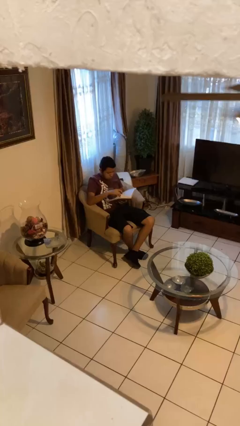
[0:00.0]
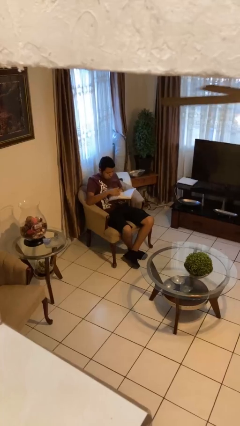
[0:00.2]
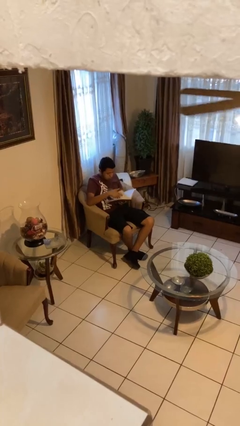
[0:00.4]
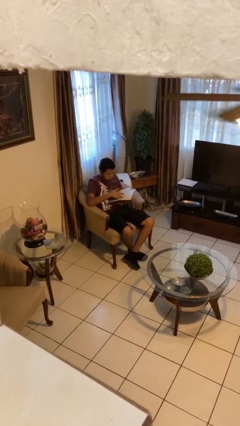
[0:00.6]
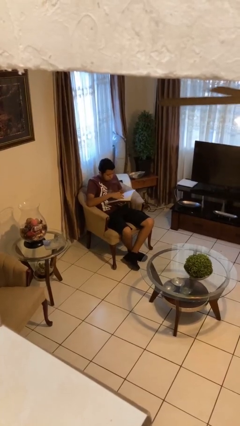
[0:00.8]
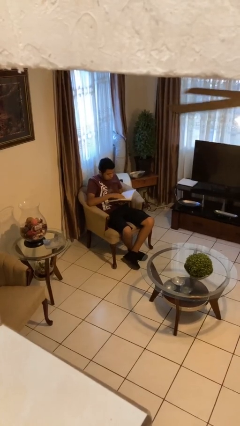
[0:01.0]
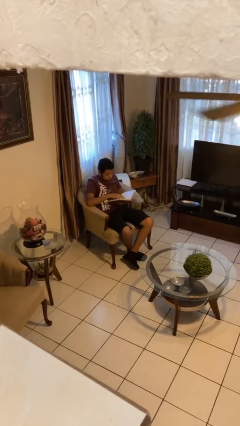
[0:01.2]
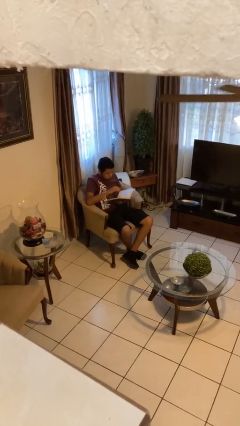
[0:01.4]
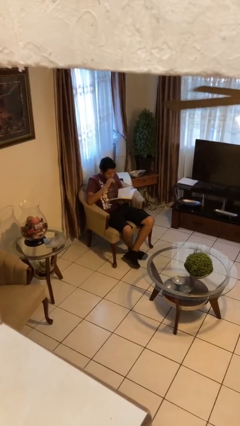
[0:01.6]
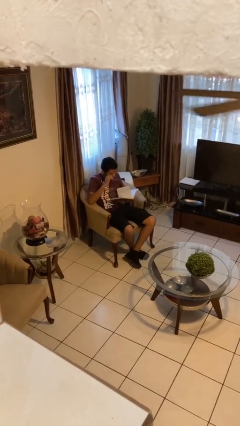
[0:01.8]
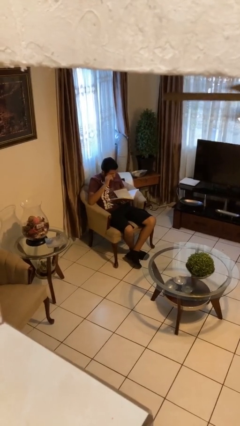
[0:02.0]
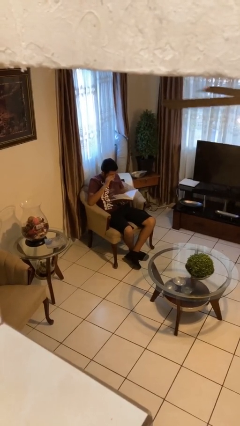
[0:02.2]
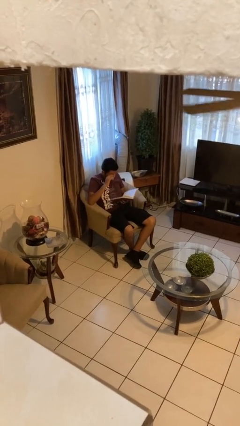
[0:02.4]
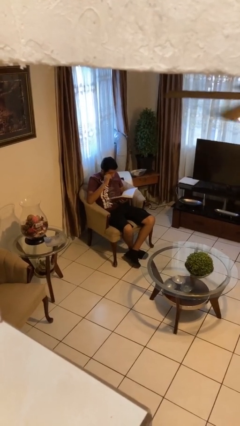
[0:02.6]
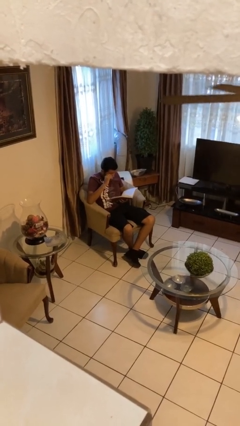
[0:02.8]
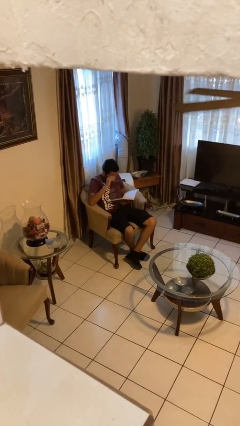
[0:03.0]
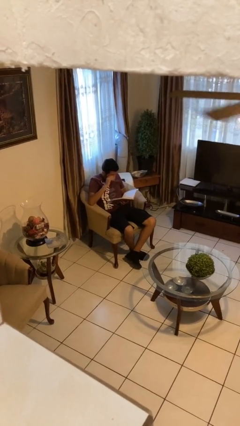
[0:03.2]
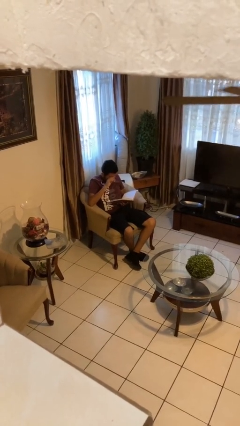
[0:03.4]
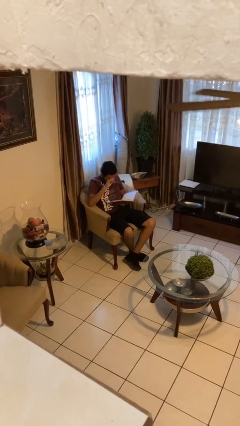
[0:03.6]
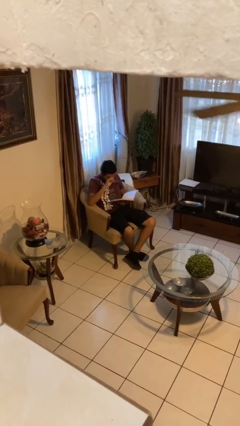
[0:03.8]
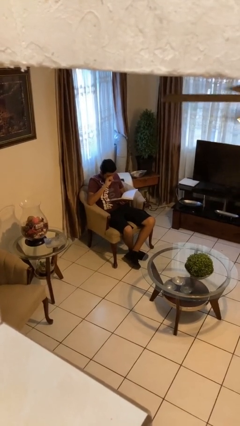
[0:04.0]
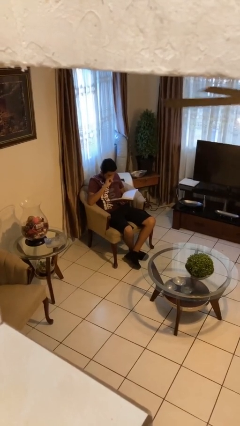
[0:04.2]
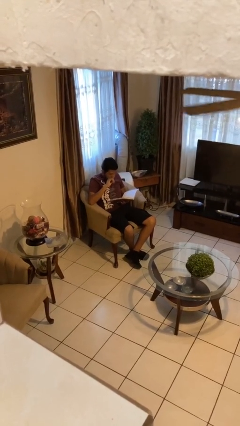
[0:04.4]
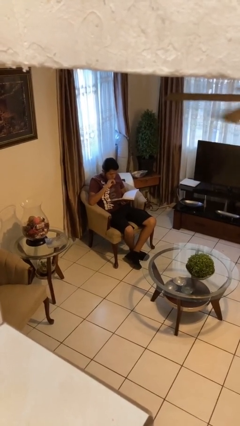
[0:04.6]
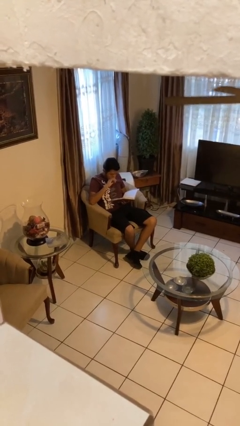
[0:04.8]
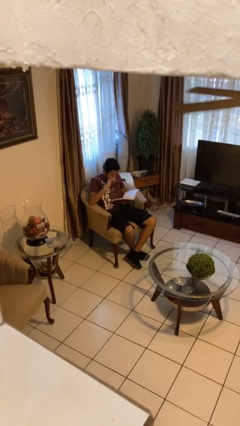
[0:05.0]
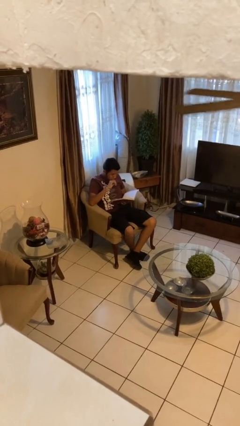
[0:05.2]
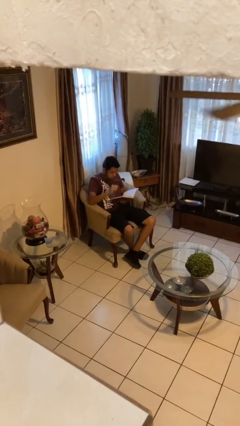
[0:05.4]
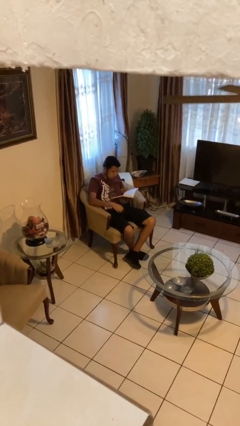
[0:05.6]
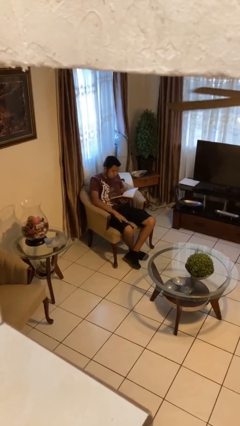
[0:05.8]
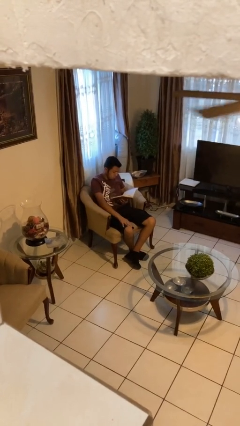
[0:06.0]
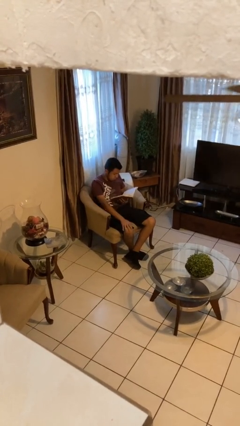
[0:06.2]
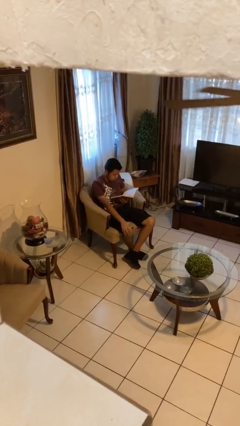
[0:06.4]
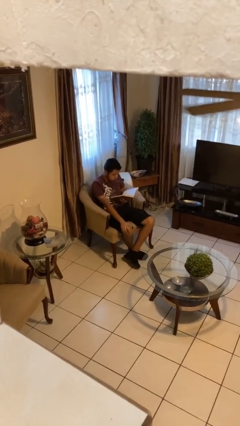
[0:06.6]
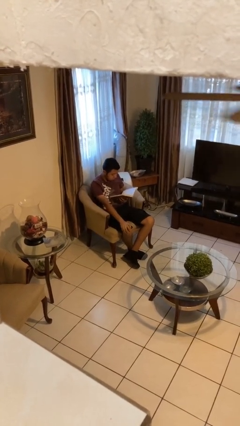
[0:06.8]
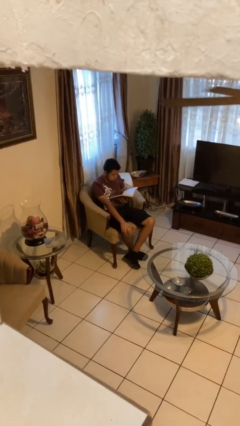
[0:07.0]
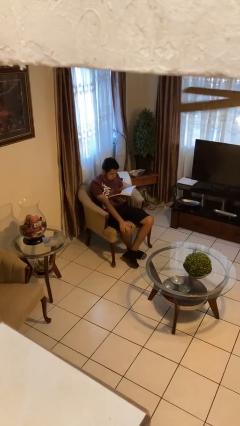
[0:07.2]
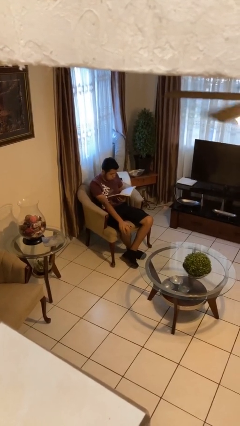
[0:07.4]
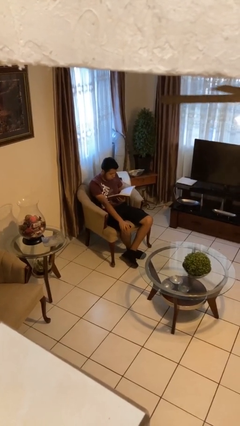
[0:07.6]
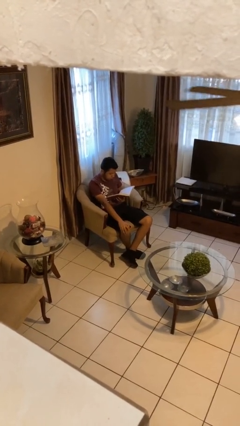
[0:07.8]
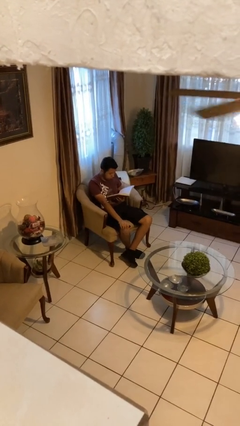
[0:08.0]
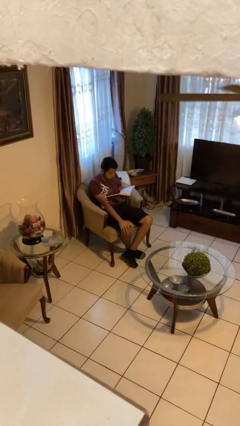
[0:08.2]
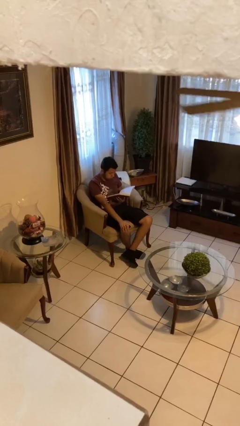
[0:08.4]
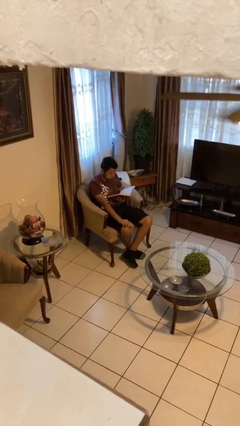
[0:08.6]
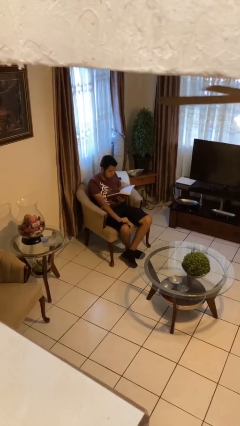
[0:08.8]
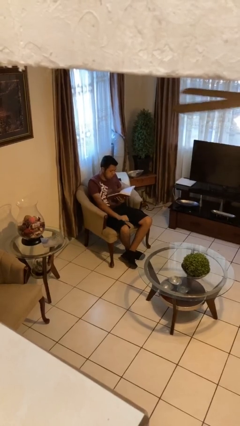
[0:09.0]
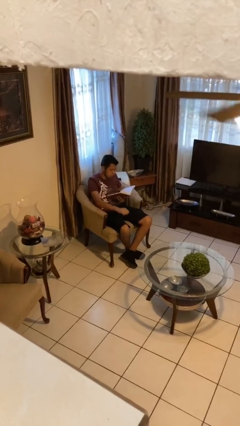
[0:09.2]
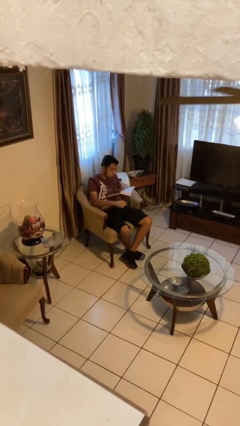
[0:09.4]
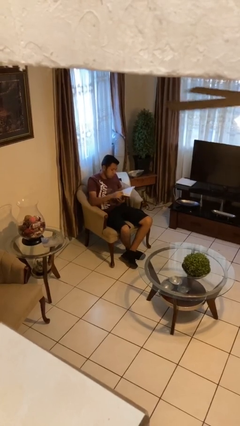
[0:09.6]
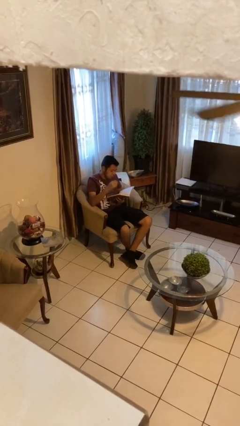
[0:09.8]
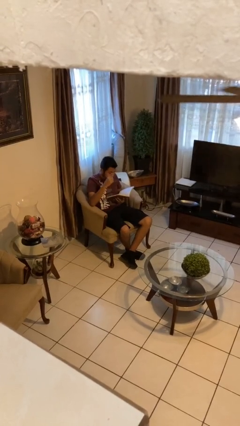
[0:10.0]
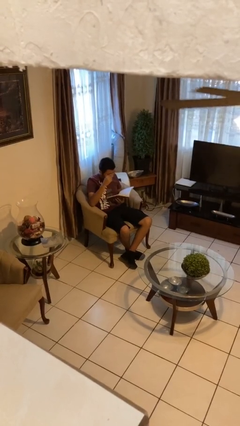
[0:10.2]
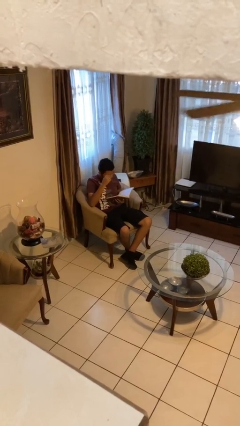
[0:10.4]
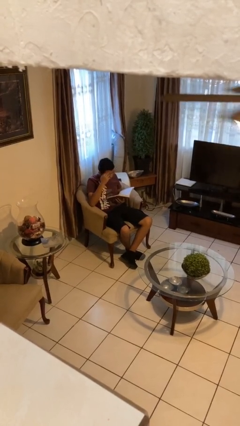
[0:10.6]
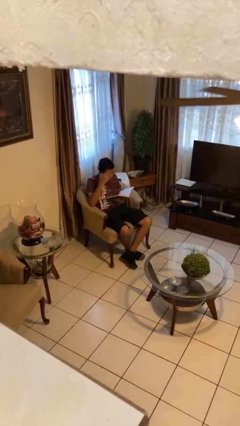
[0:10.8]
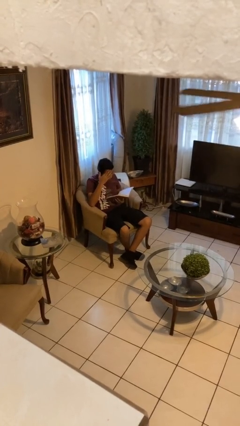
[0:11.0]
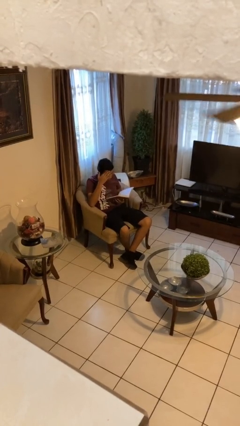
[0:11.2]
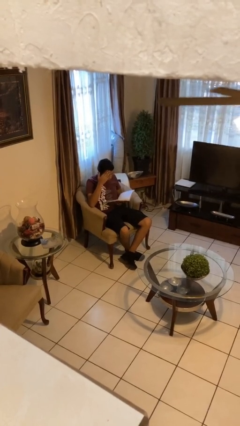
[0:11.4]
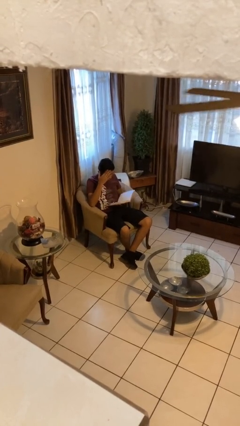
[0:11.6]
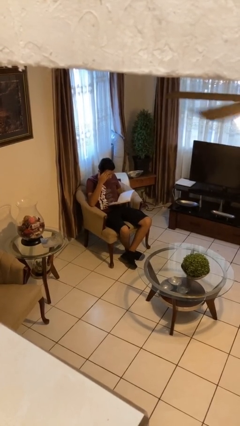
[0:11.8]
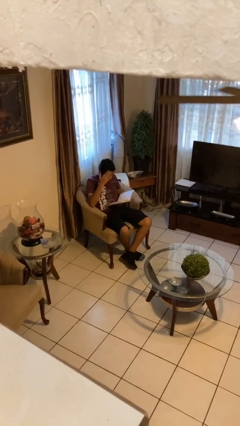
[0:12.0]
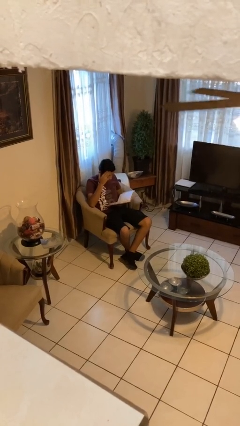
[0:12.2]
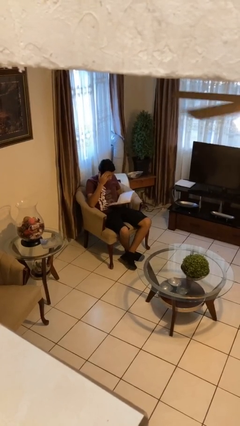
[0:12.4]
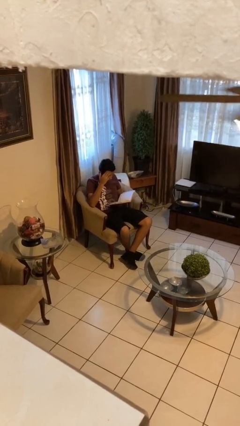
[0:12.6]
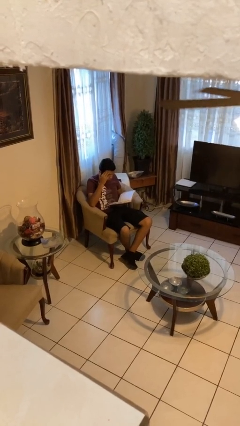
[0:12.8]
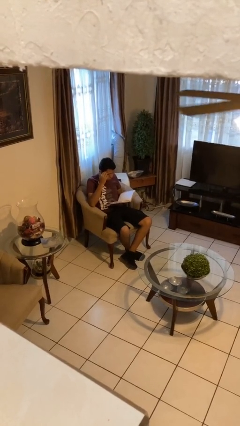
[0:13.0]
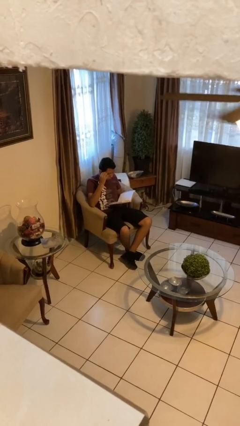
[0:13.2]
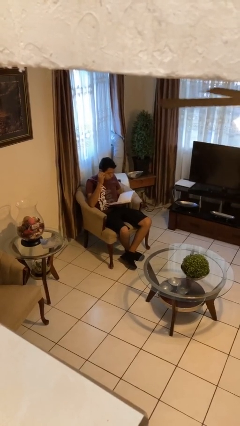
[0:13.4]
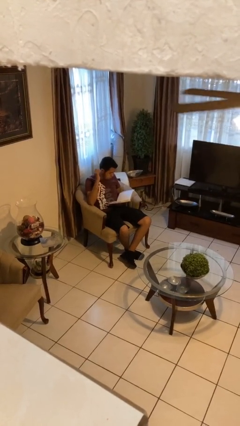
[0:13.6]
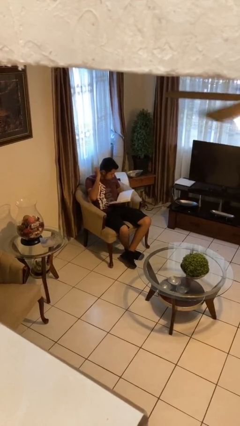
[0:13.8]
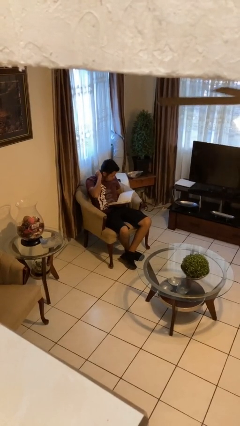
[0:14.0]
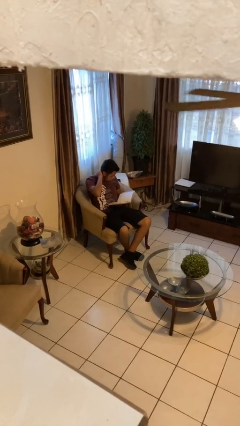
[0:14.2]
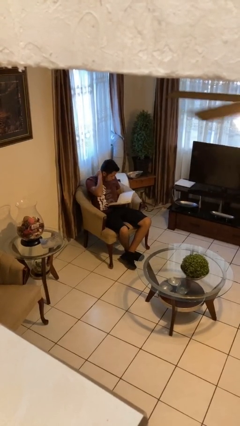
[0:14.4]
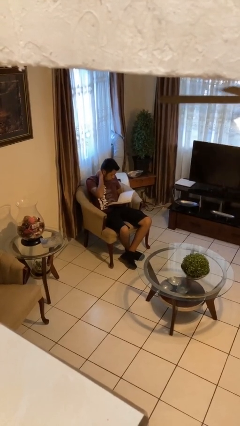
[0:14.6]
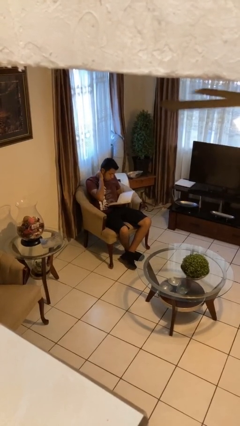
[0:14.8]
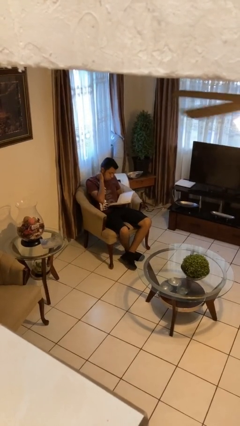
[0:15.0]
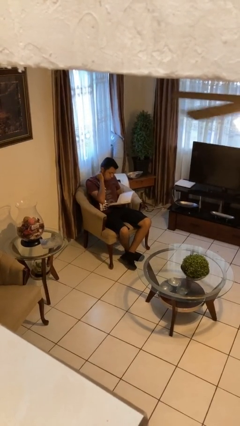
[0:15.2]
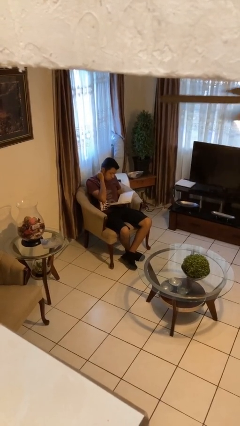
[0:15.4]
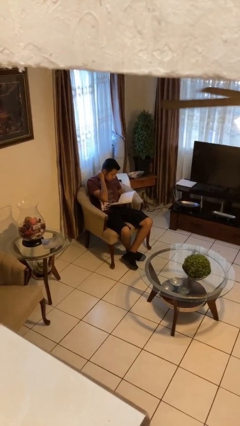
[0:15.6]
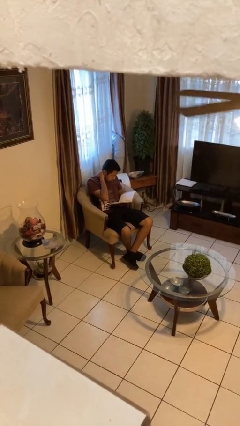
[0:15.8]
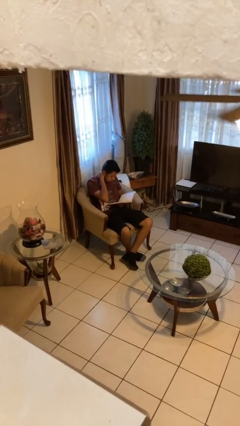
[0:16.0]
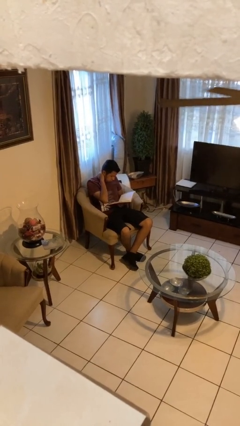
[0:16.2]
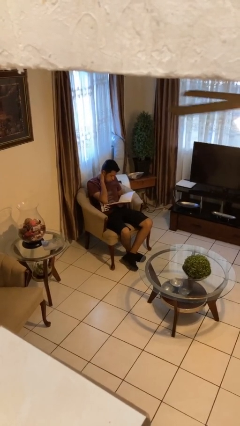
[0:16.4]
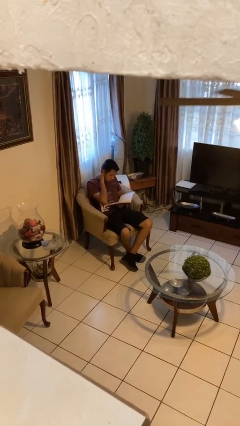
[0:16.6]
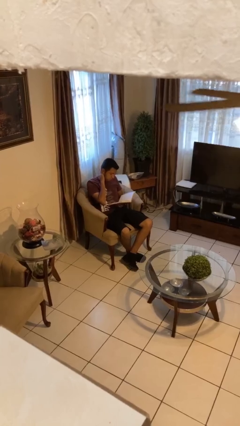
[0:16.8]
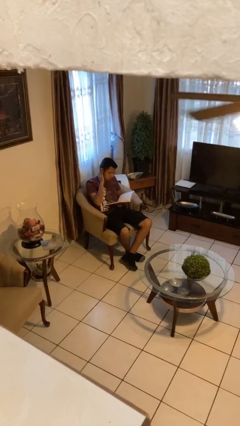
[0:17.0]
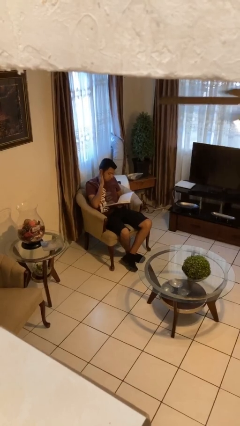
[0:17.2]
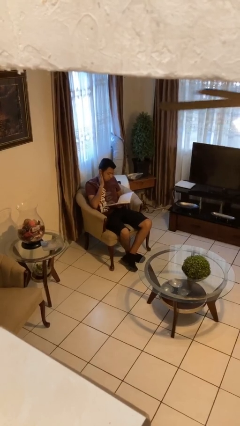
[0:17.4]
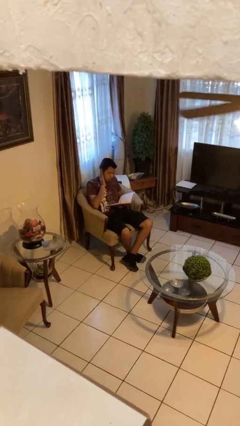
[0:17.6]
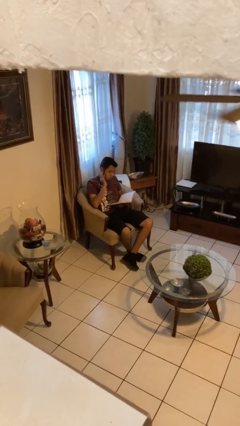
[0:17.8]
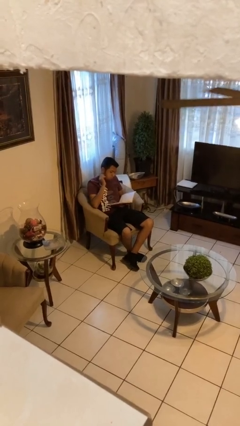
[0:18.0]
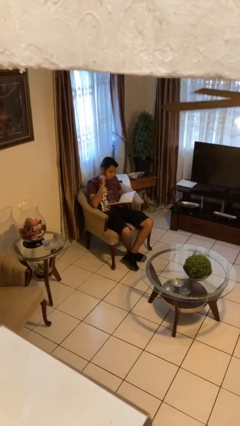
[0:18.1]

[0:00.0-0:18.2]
person reads document

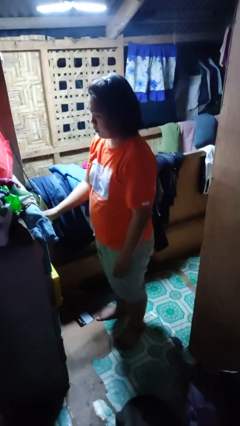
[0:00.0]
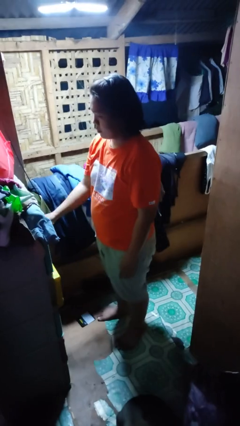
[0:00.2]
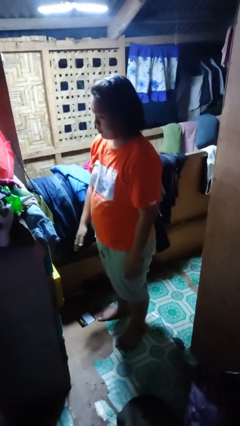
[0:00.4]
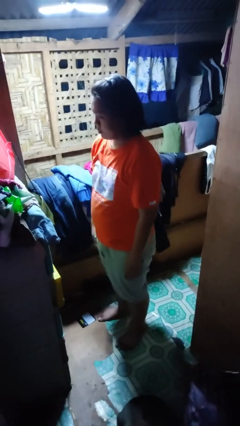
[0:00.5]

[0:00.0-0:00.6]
person closes dresser drawer
